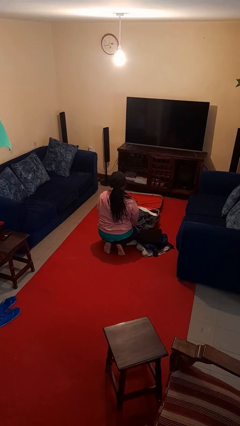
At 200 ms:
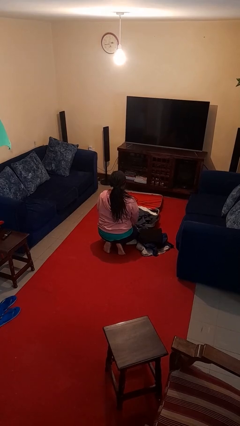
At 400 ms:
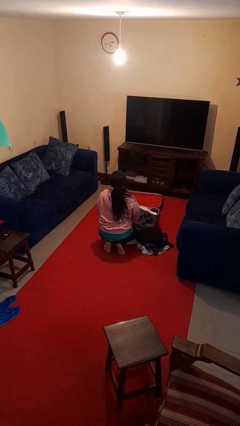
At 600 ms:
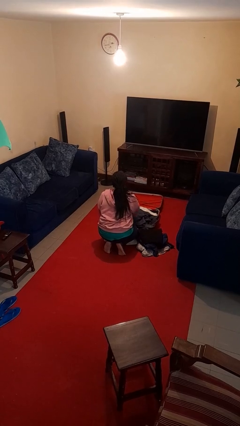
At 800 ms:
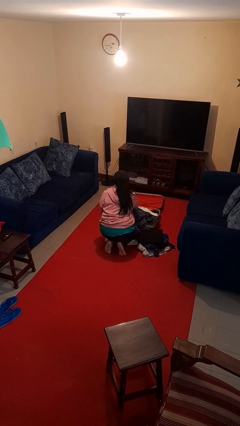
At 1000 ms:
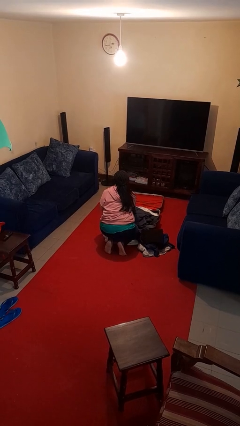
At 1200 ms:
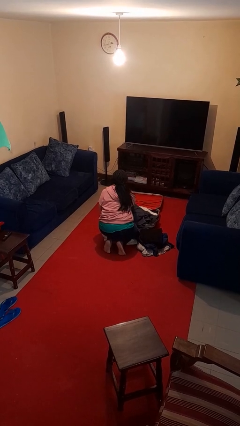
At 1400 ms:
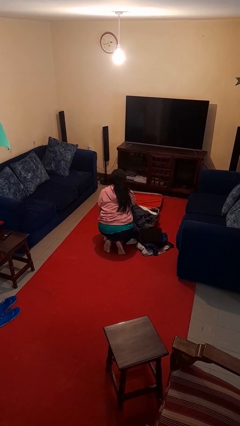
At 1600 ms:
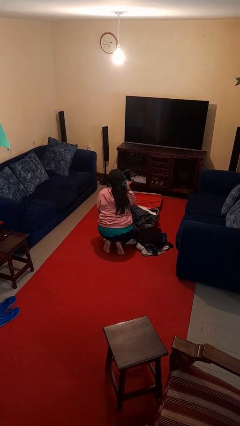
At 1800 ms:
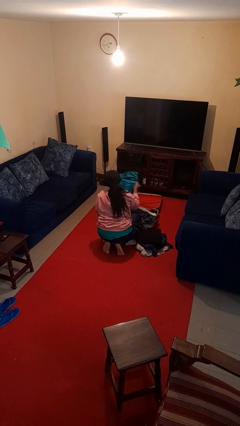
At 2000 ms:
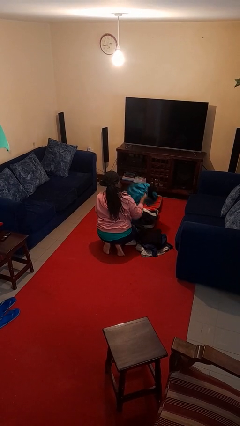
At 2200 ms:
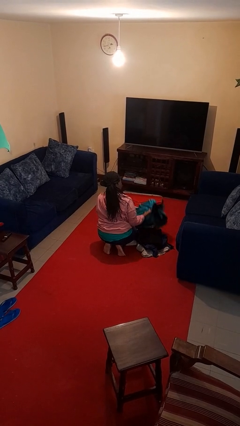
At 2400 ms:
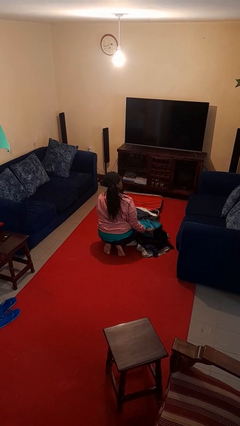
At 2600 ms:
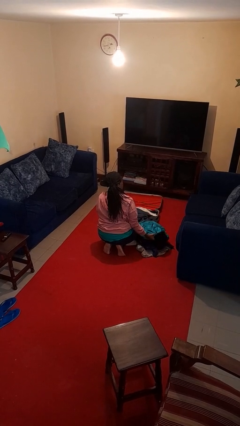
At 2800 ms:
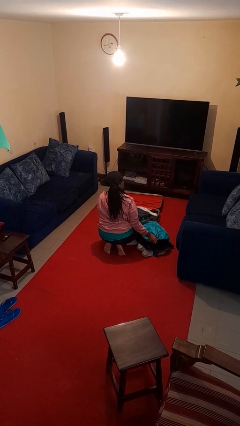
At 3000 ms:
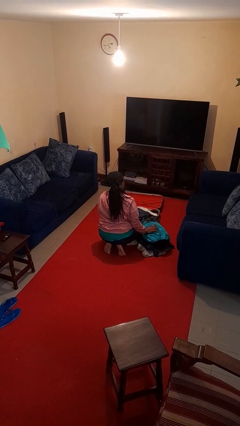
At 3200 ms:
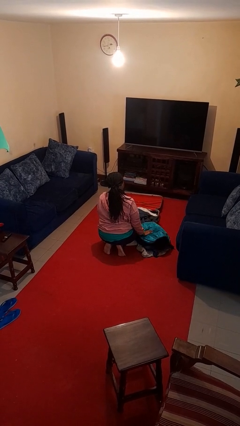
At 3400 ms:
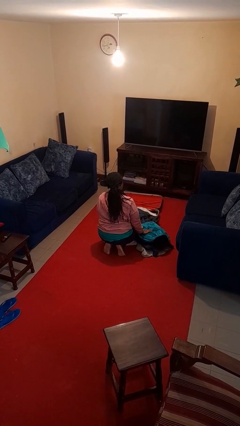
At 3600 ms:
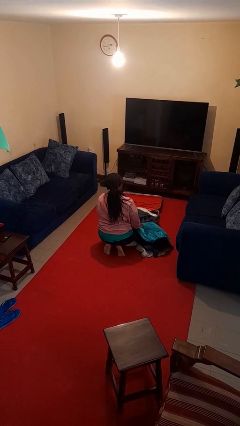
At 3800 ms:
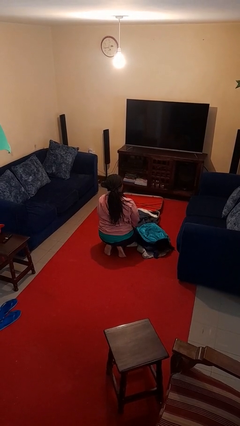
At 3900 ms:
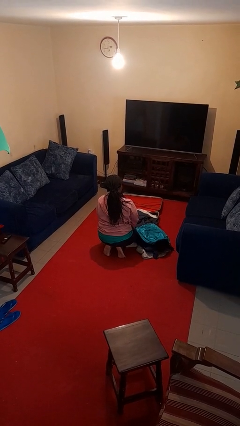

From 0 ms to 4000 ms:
person unloads clothes from suitcase

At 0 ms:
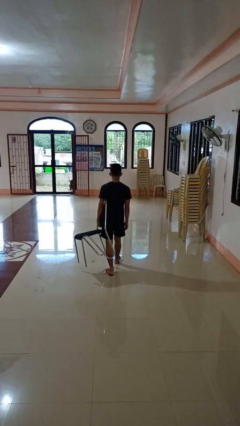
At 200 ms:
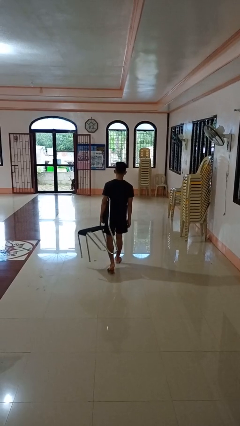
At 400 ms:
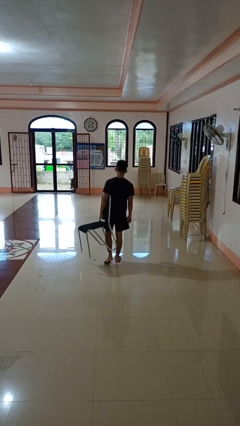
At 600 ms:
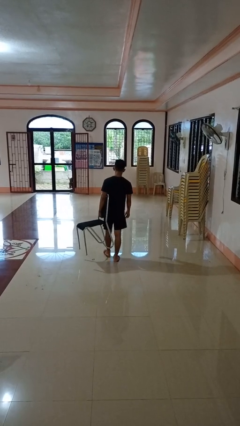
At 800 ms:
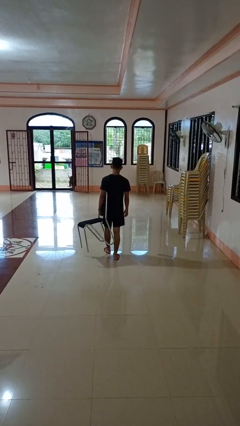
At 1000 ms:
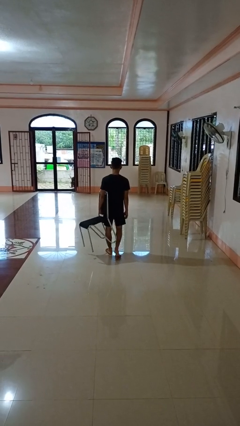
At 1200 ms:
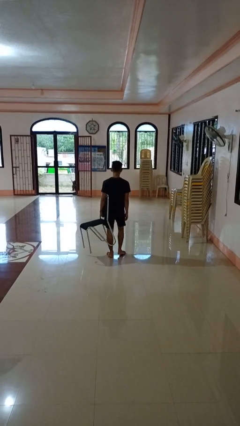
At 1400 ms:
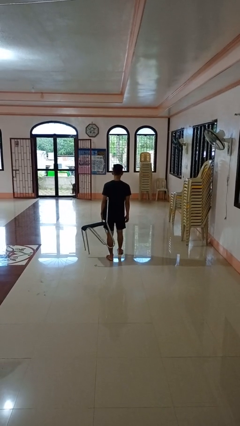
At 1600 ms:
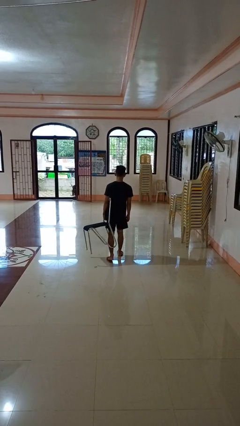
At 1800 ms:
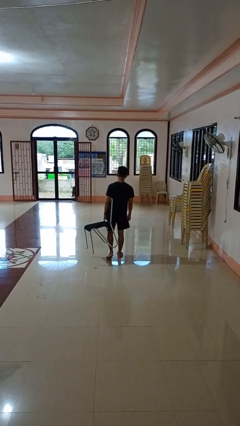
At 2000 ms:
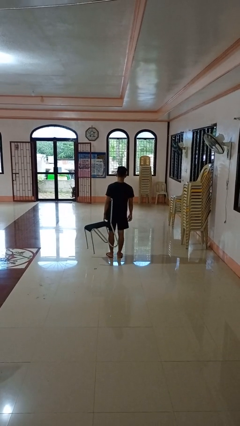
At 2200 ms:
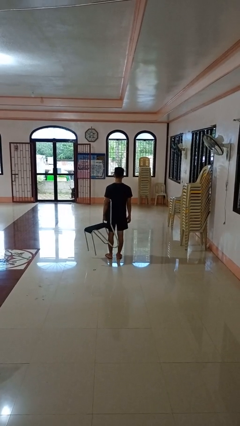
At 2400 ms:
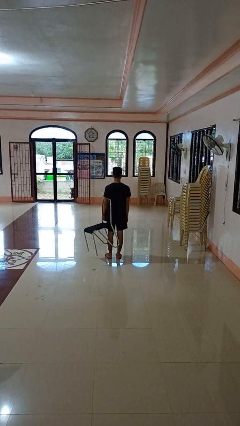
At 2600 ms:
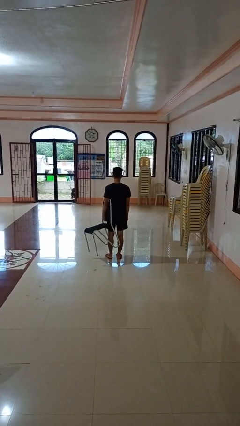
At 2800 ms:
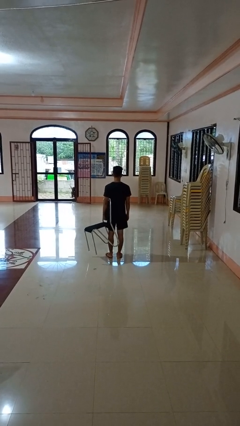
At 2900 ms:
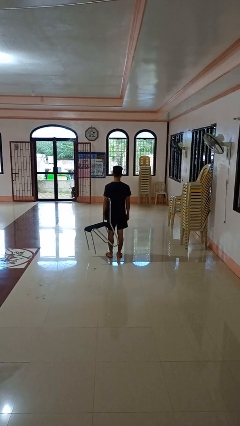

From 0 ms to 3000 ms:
person carries furniture

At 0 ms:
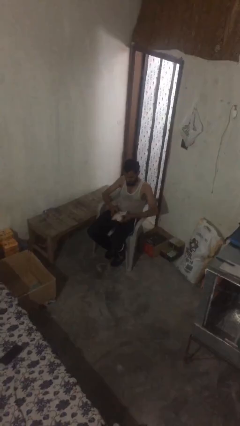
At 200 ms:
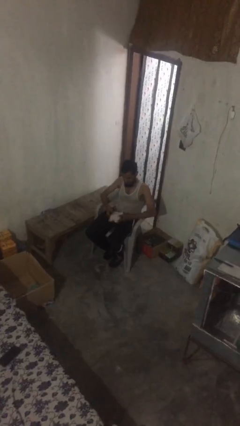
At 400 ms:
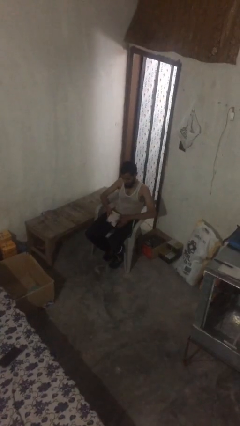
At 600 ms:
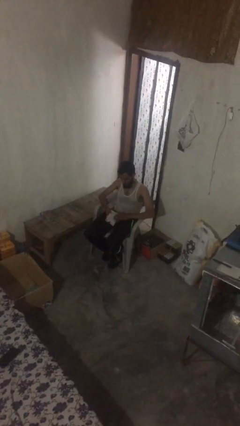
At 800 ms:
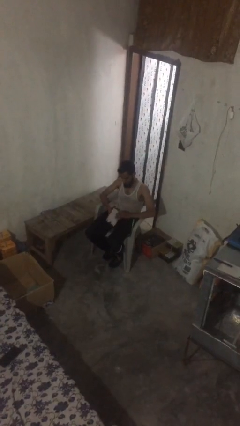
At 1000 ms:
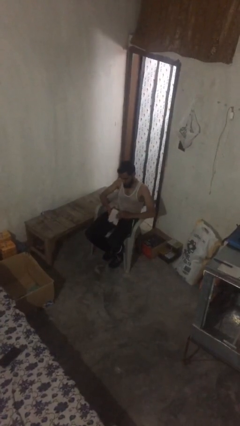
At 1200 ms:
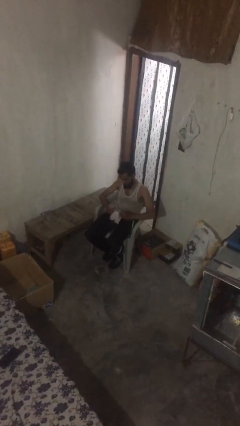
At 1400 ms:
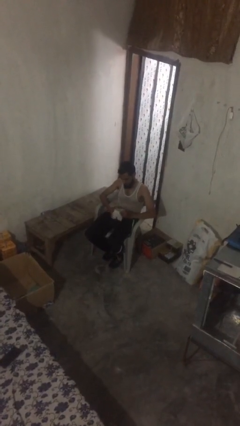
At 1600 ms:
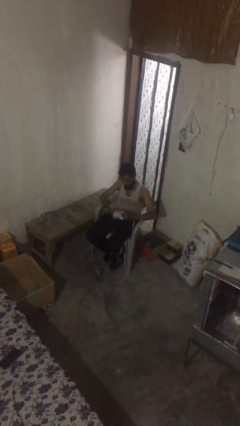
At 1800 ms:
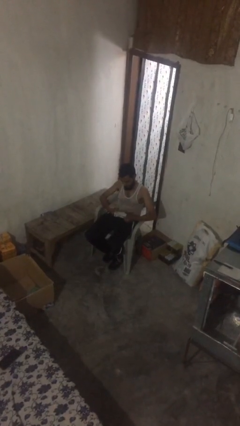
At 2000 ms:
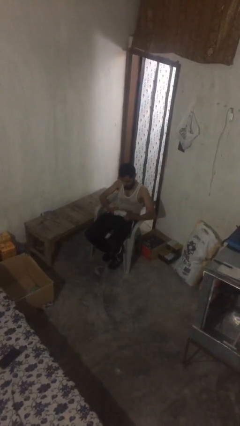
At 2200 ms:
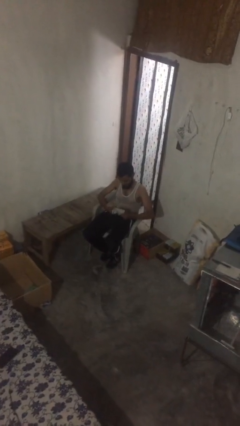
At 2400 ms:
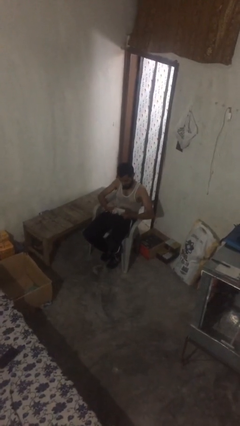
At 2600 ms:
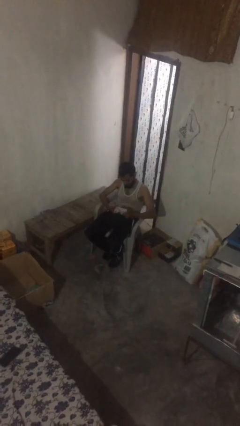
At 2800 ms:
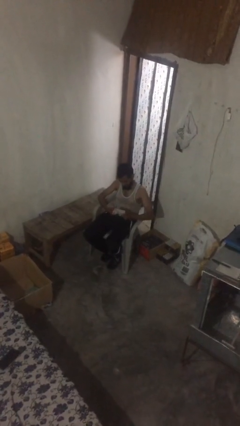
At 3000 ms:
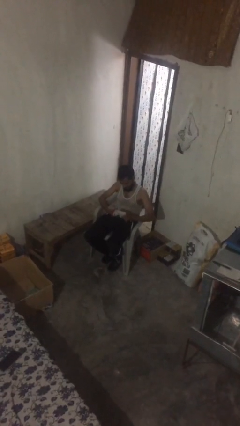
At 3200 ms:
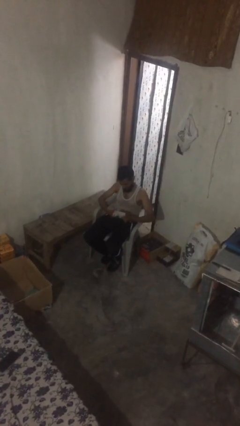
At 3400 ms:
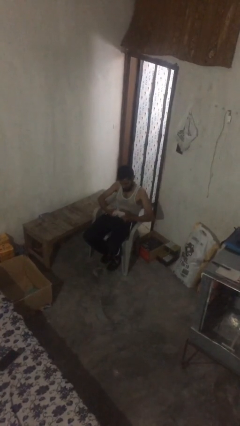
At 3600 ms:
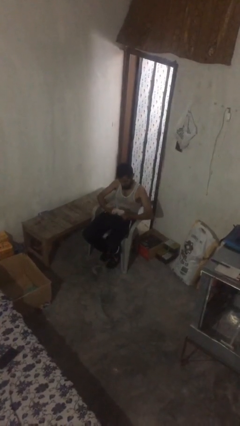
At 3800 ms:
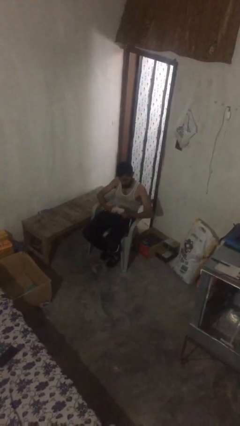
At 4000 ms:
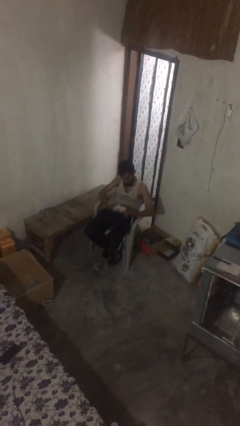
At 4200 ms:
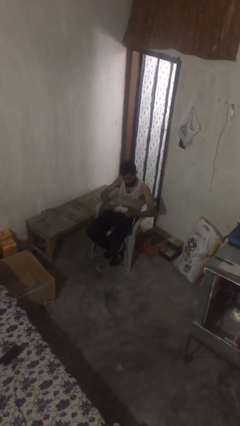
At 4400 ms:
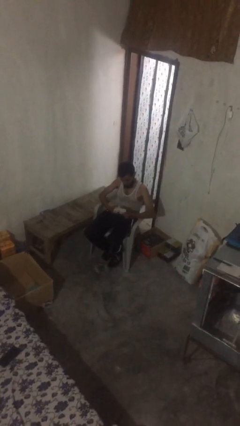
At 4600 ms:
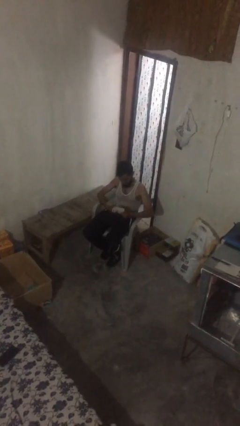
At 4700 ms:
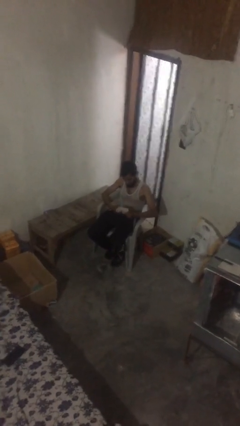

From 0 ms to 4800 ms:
person reads document

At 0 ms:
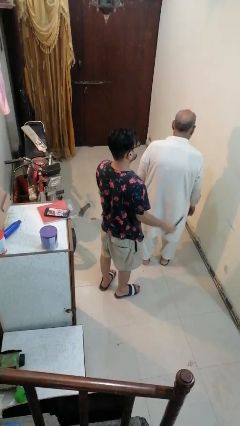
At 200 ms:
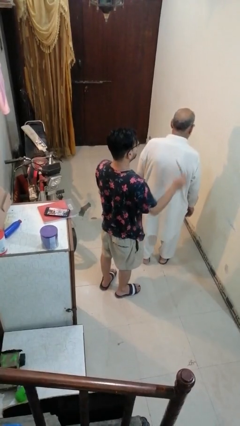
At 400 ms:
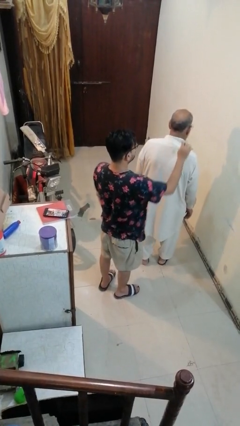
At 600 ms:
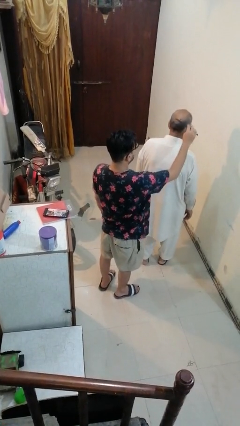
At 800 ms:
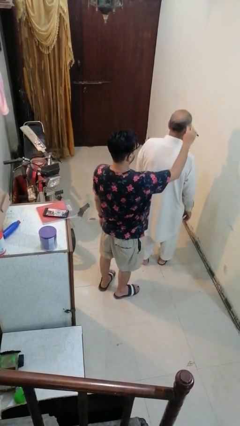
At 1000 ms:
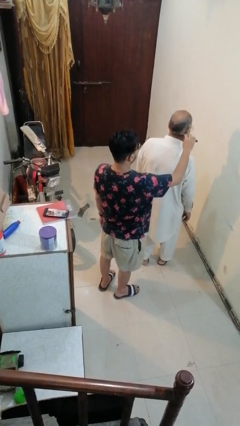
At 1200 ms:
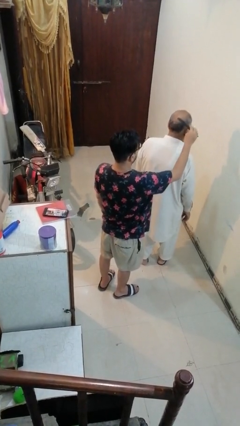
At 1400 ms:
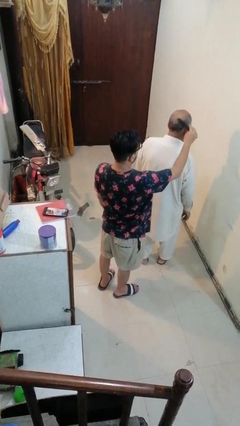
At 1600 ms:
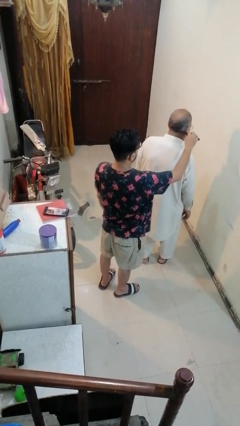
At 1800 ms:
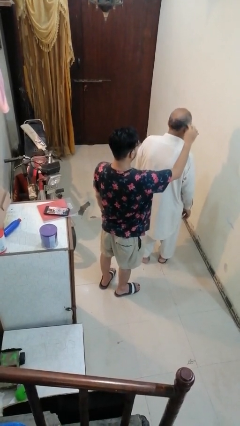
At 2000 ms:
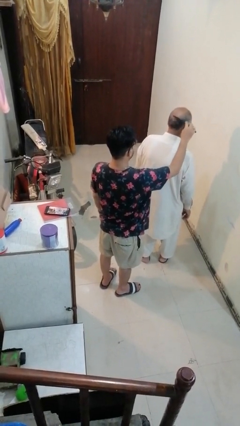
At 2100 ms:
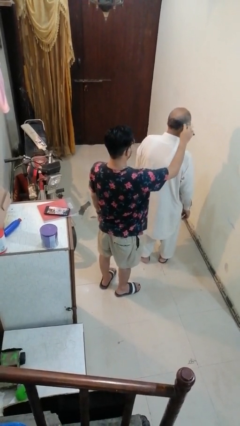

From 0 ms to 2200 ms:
person brushes hair of person

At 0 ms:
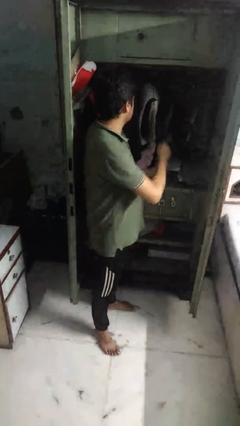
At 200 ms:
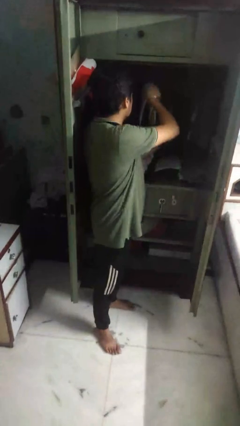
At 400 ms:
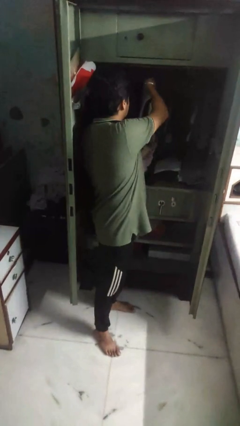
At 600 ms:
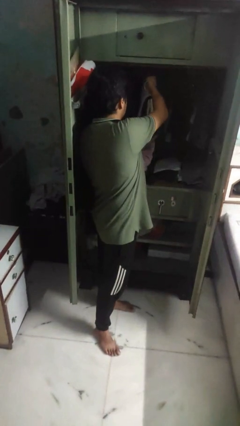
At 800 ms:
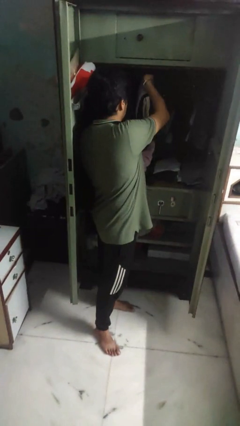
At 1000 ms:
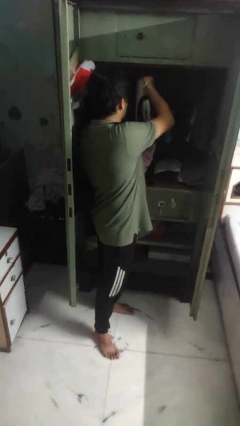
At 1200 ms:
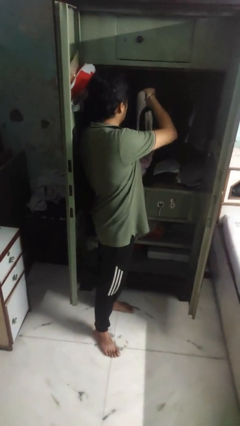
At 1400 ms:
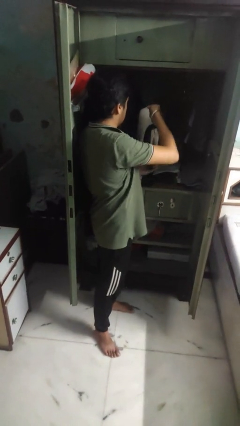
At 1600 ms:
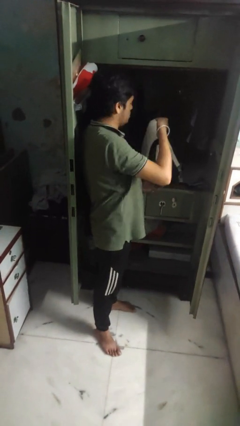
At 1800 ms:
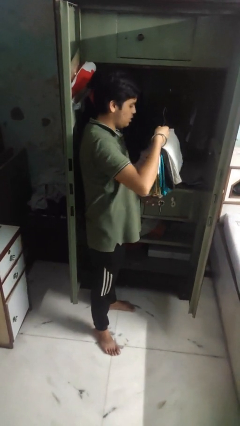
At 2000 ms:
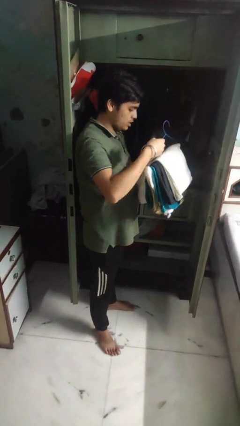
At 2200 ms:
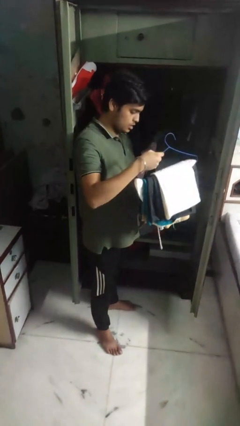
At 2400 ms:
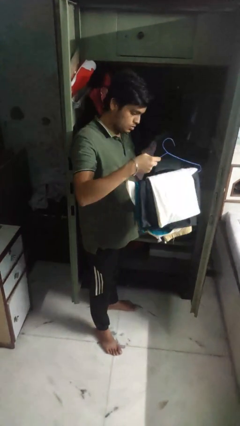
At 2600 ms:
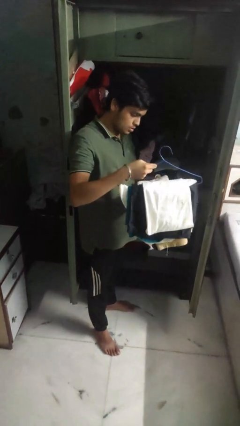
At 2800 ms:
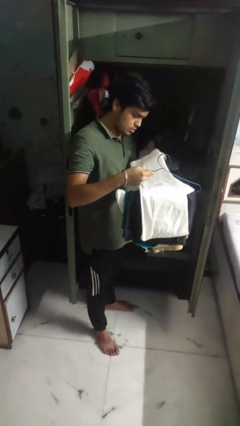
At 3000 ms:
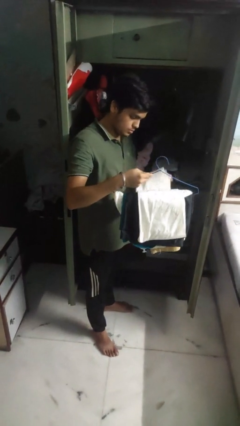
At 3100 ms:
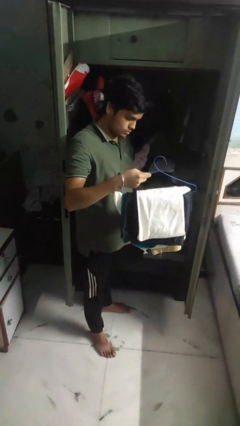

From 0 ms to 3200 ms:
person takes clothes from closet
